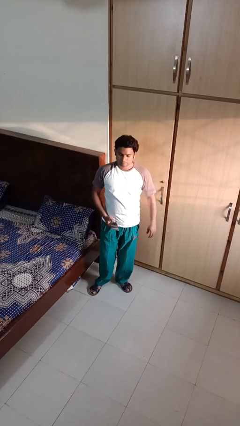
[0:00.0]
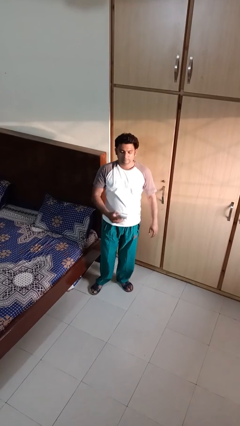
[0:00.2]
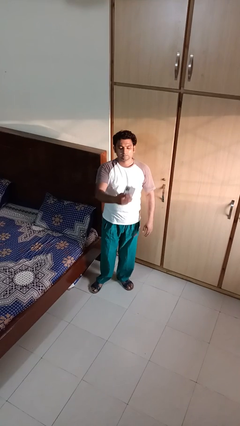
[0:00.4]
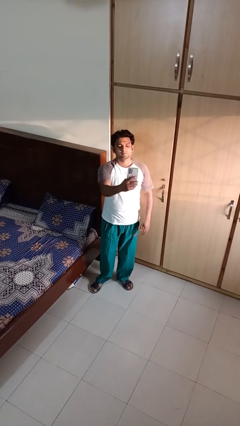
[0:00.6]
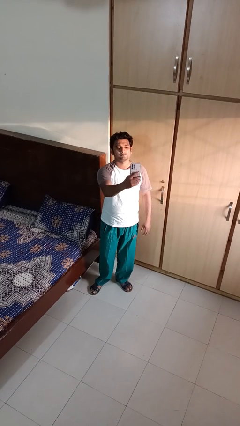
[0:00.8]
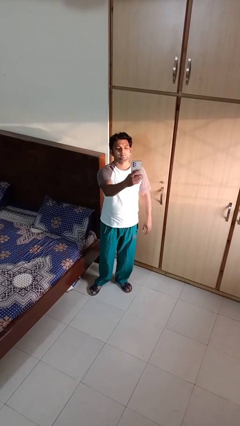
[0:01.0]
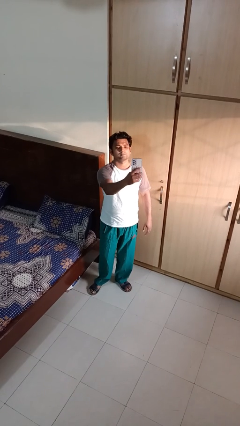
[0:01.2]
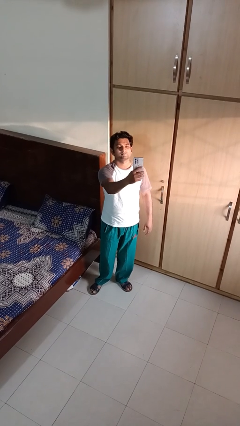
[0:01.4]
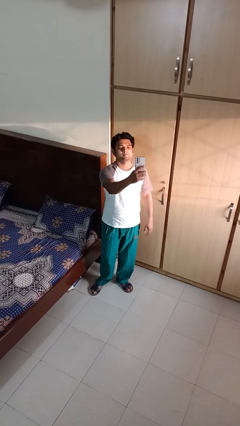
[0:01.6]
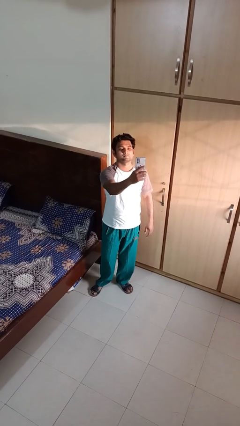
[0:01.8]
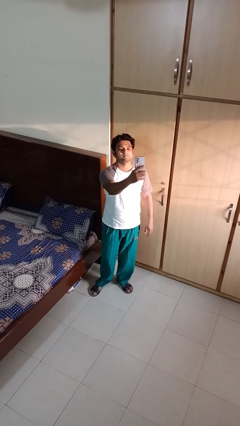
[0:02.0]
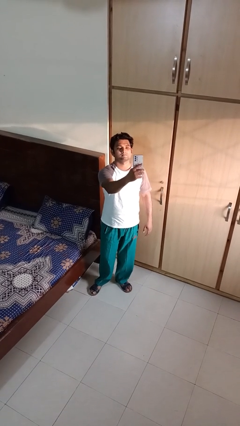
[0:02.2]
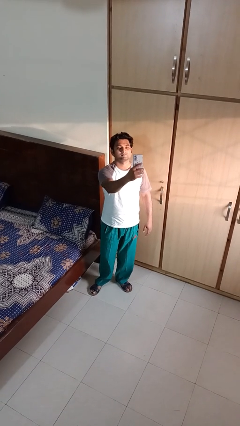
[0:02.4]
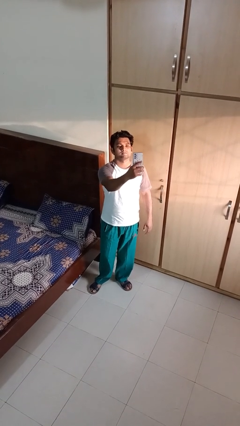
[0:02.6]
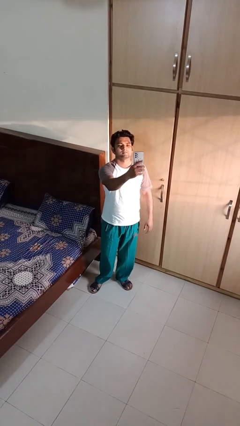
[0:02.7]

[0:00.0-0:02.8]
person takes selfie

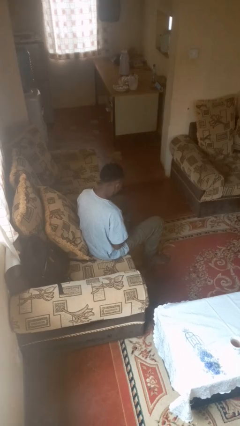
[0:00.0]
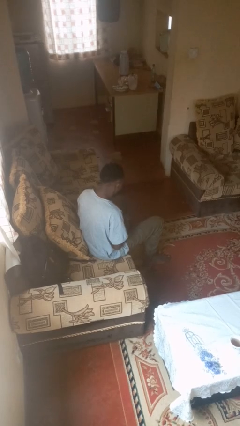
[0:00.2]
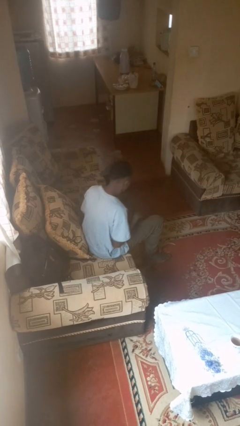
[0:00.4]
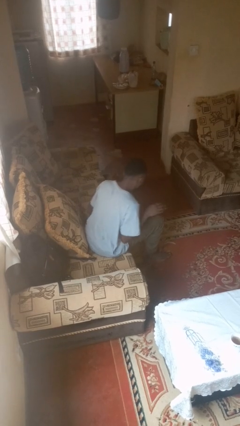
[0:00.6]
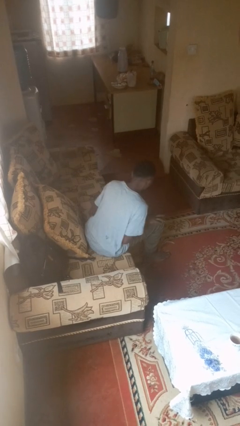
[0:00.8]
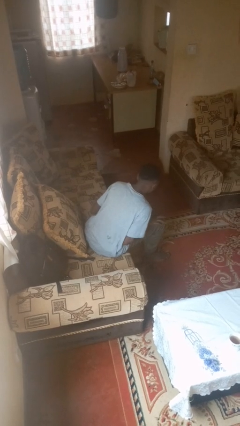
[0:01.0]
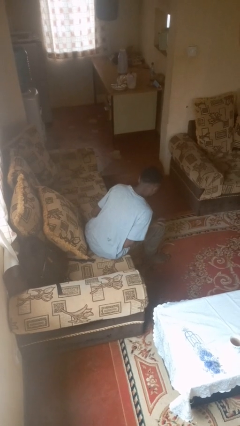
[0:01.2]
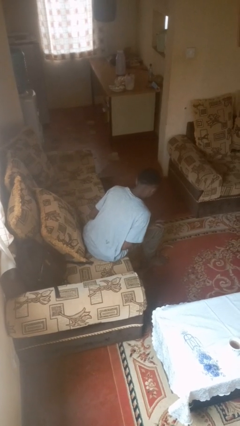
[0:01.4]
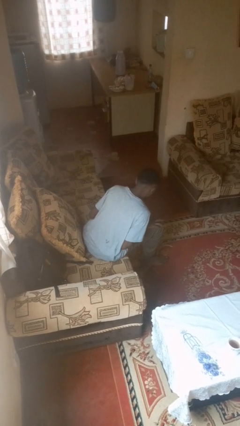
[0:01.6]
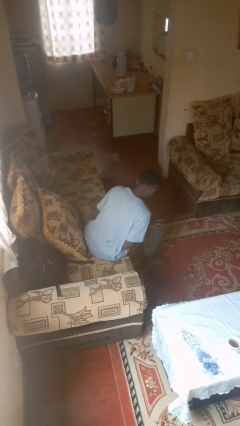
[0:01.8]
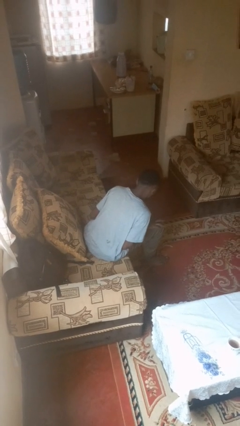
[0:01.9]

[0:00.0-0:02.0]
person slaps hands on thighs

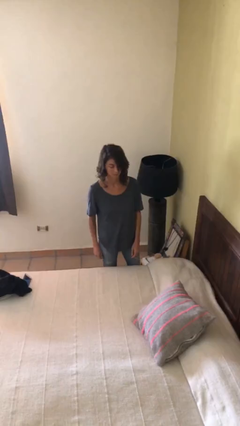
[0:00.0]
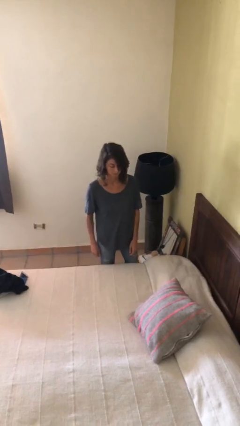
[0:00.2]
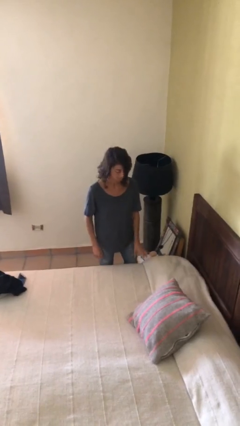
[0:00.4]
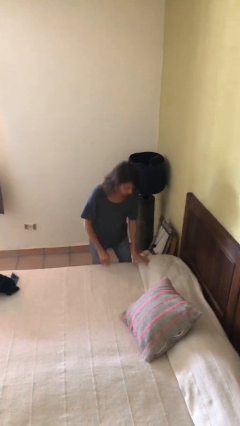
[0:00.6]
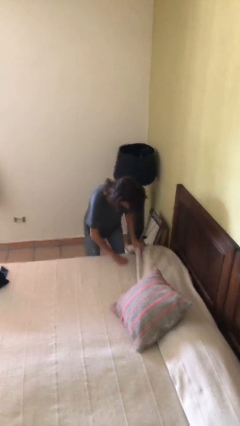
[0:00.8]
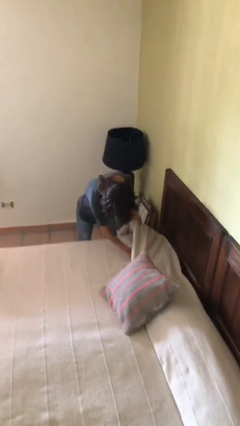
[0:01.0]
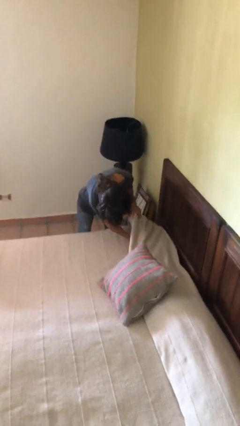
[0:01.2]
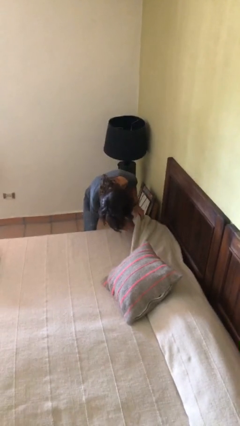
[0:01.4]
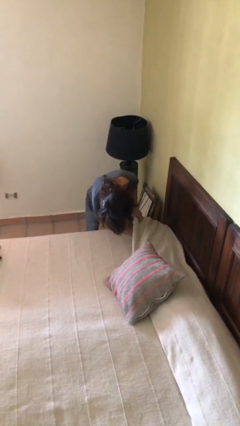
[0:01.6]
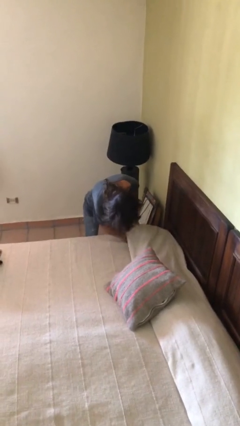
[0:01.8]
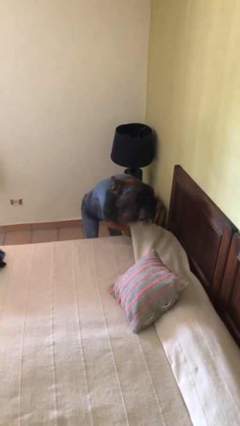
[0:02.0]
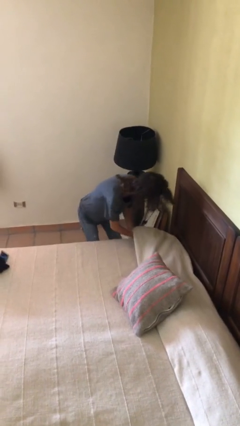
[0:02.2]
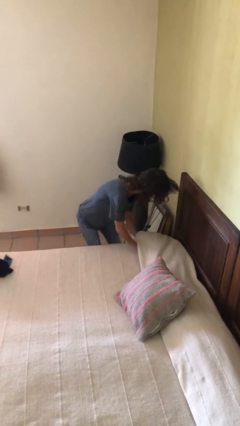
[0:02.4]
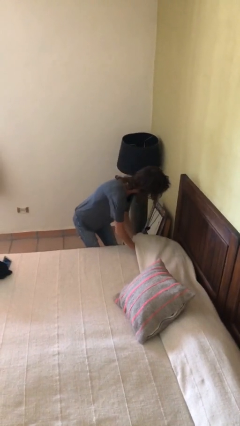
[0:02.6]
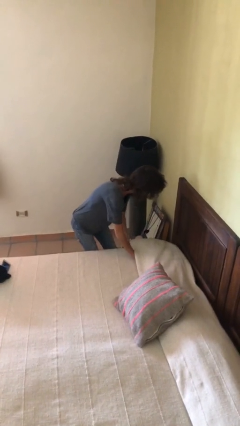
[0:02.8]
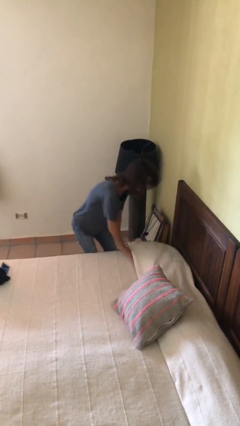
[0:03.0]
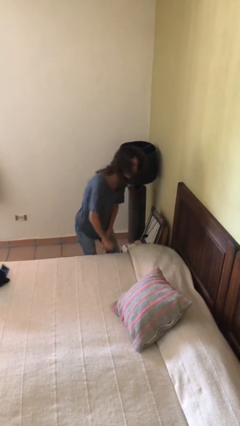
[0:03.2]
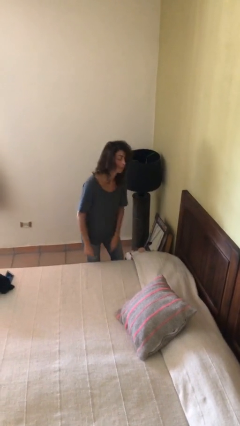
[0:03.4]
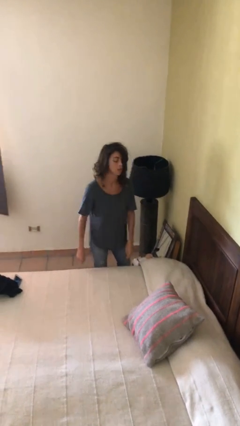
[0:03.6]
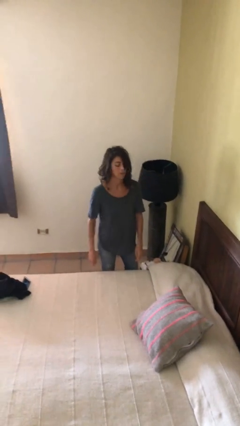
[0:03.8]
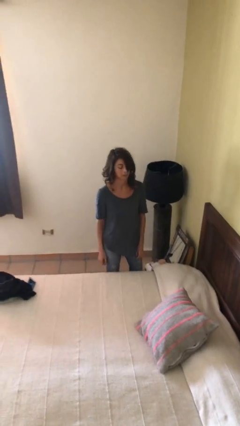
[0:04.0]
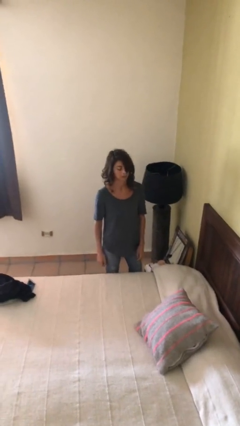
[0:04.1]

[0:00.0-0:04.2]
person searches in couch

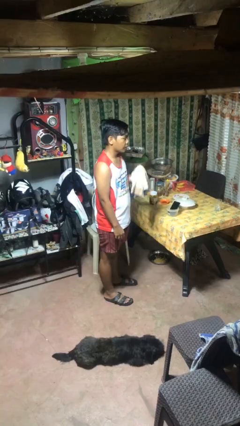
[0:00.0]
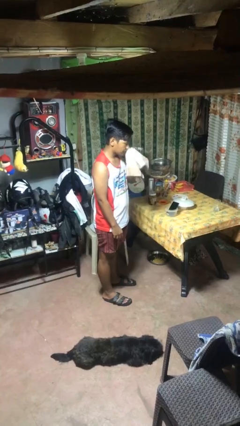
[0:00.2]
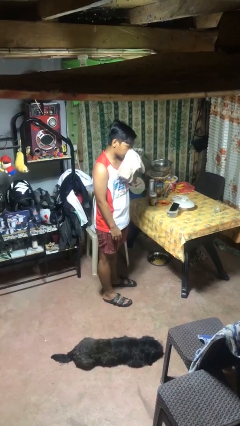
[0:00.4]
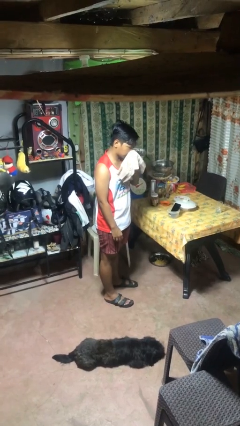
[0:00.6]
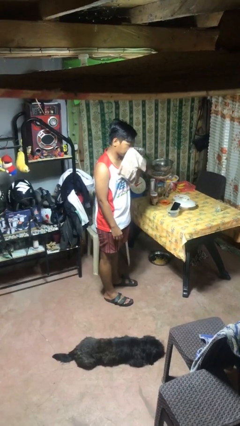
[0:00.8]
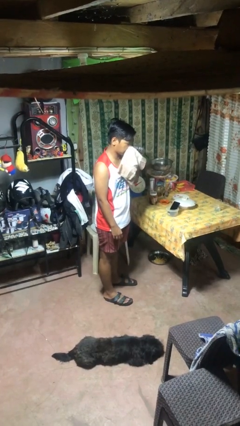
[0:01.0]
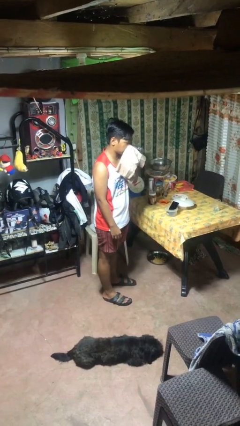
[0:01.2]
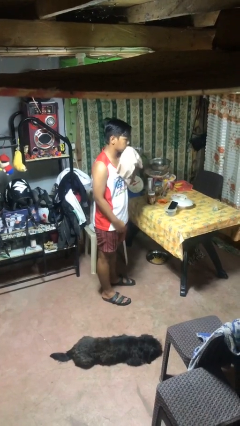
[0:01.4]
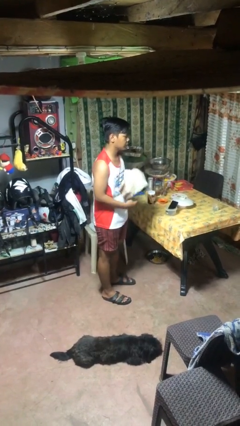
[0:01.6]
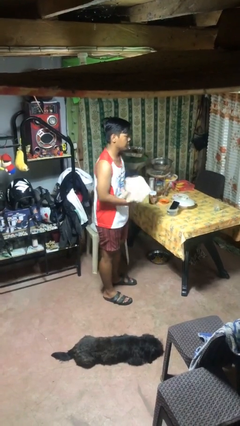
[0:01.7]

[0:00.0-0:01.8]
person blows nose

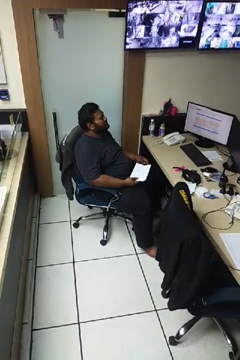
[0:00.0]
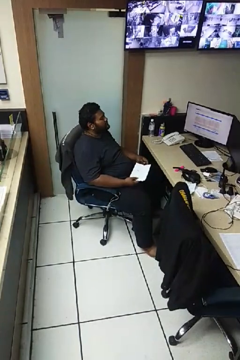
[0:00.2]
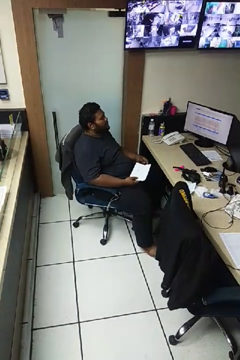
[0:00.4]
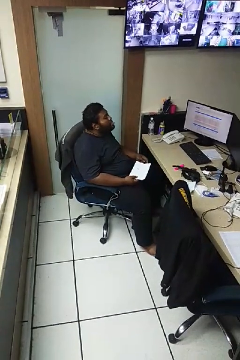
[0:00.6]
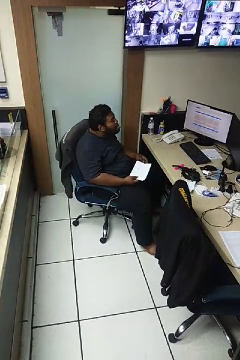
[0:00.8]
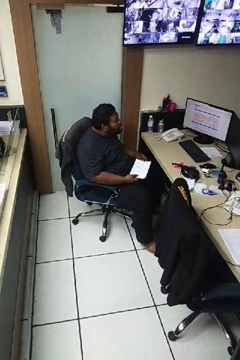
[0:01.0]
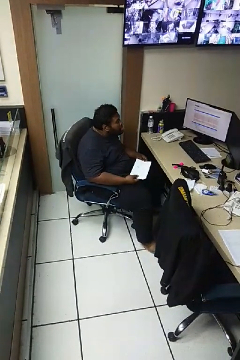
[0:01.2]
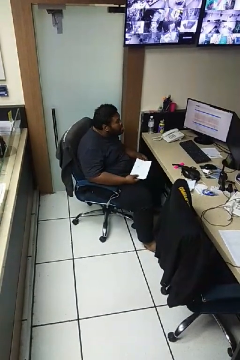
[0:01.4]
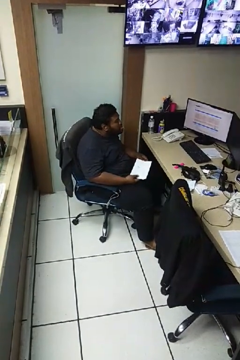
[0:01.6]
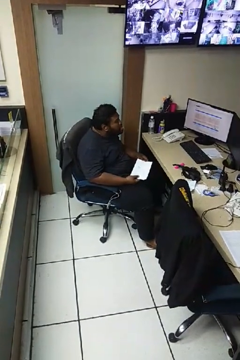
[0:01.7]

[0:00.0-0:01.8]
person sticks out tongue

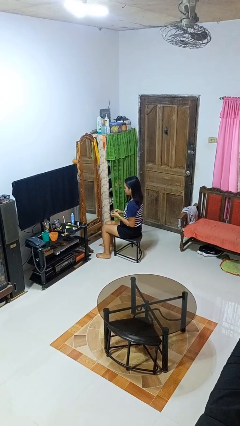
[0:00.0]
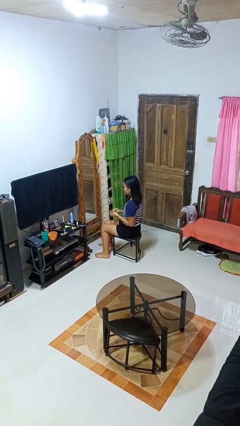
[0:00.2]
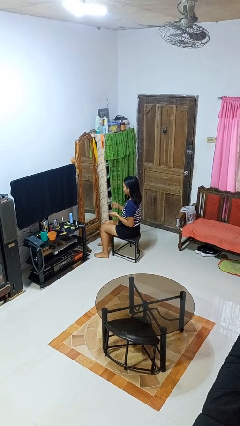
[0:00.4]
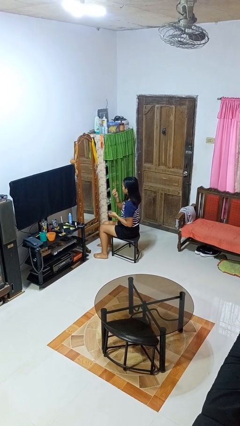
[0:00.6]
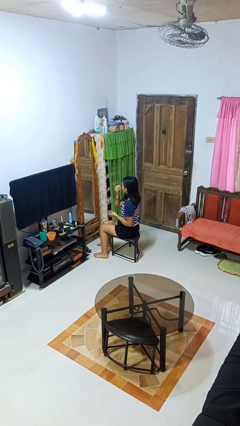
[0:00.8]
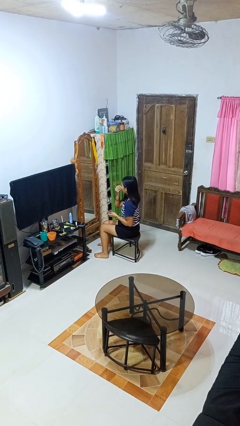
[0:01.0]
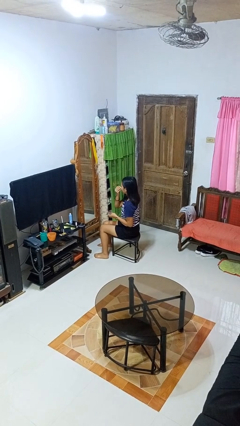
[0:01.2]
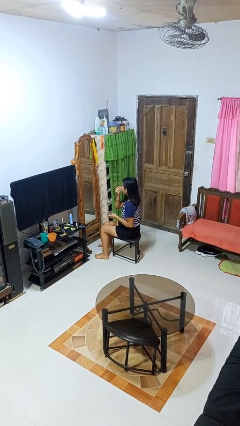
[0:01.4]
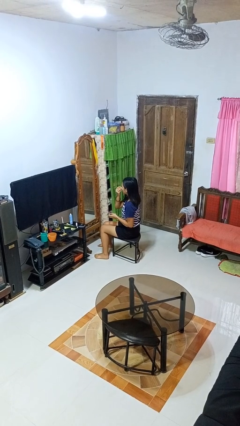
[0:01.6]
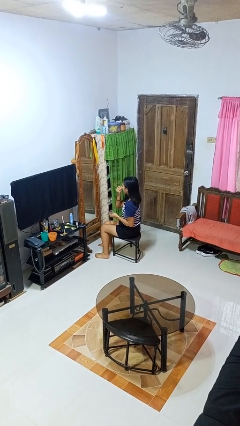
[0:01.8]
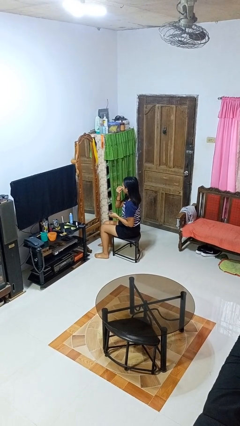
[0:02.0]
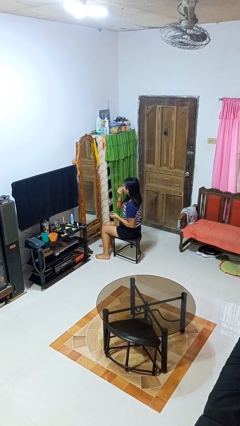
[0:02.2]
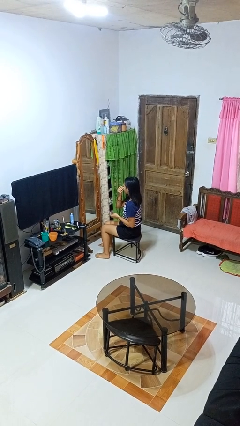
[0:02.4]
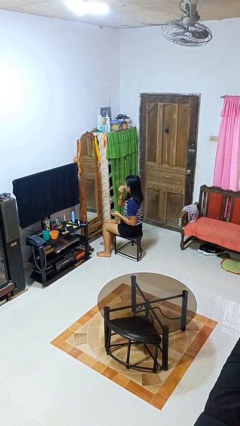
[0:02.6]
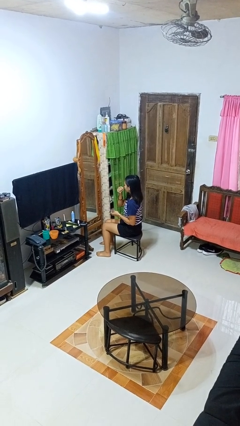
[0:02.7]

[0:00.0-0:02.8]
person applies eye makeup

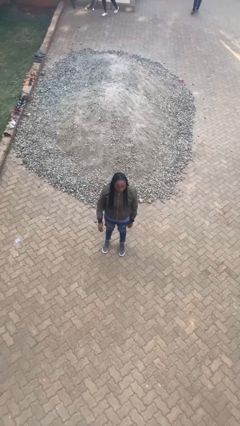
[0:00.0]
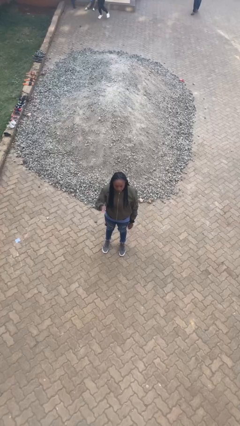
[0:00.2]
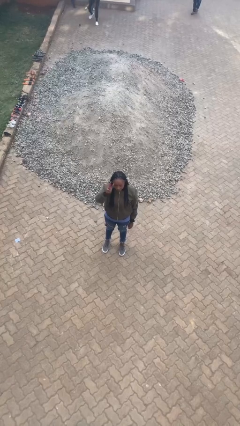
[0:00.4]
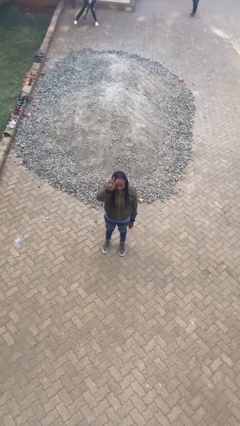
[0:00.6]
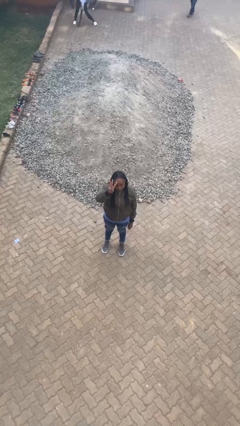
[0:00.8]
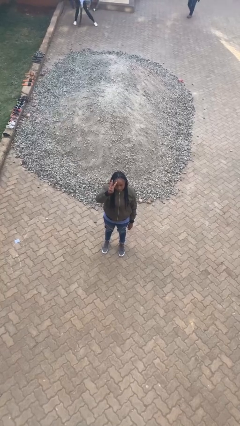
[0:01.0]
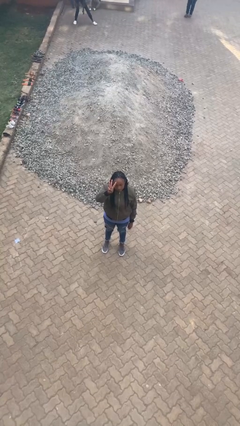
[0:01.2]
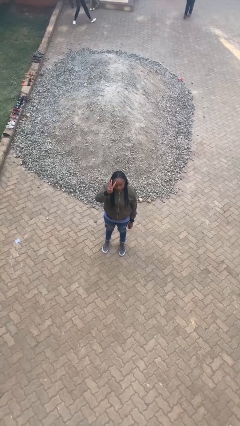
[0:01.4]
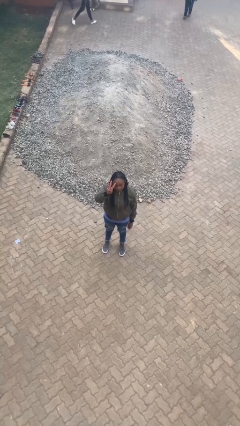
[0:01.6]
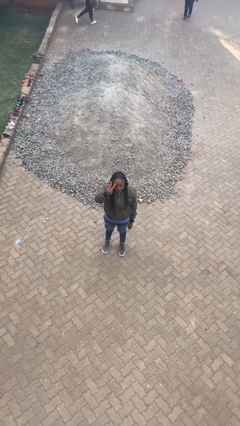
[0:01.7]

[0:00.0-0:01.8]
person gestures number three

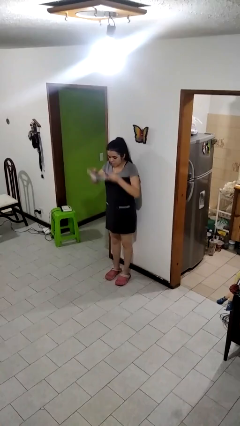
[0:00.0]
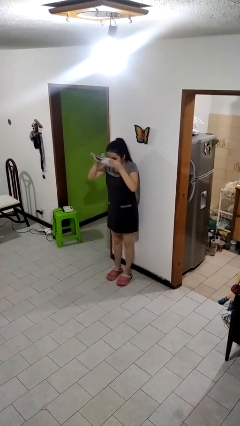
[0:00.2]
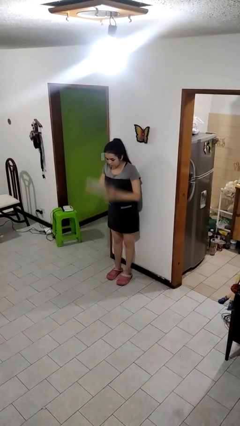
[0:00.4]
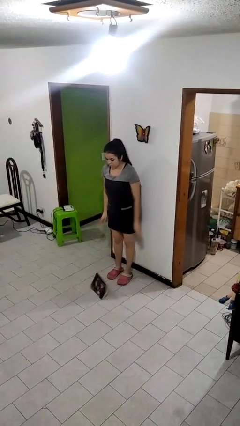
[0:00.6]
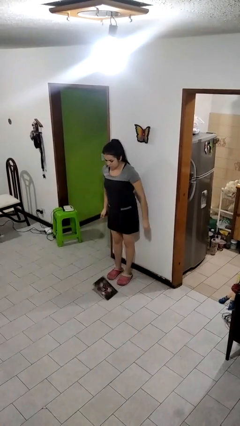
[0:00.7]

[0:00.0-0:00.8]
person throws object to ground
